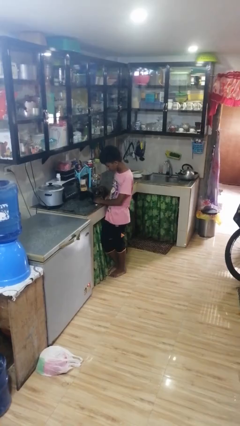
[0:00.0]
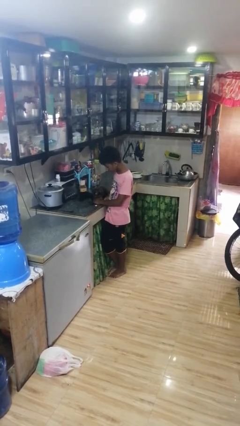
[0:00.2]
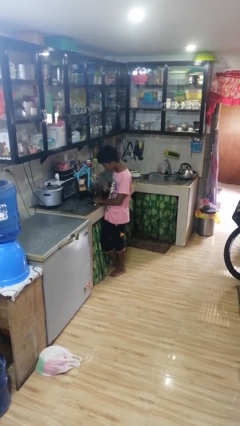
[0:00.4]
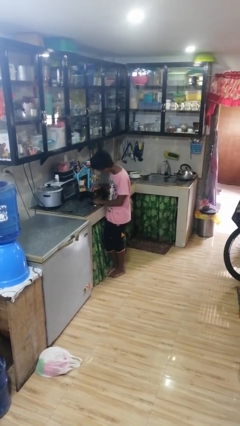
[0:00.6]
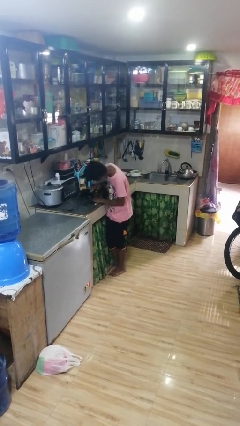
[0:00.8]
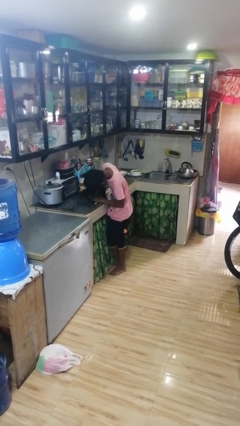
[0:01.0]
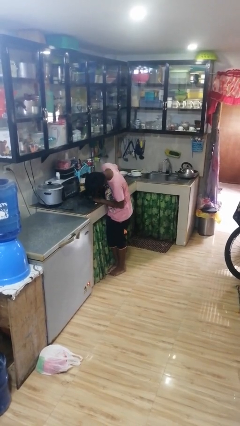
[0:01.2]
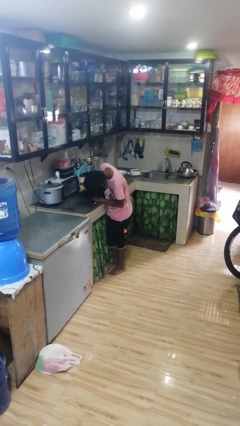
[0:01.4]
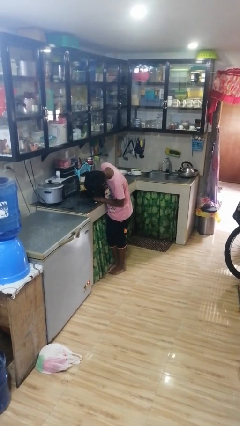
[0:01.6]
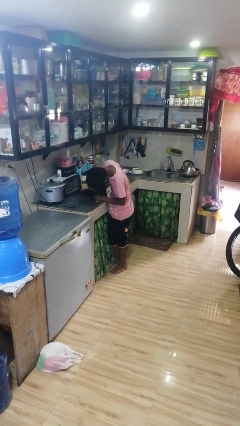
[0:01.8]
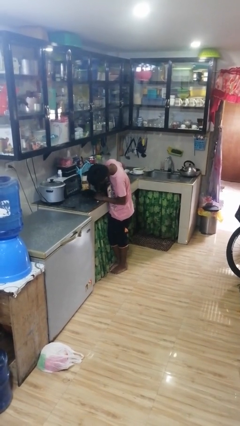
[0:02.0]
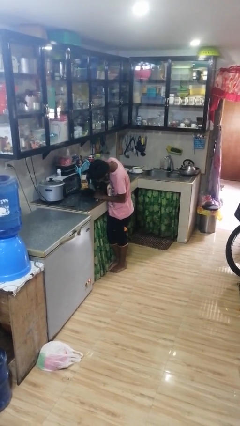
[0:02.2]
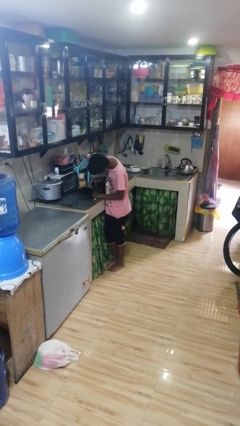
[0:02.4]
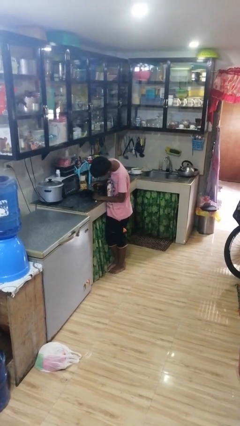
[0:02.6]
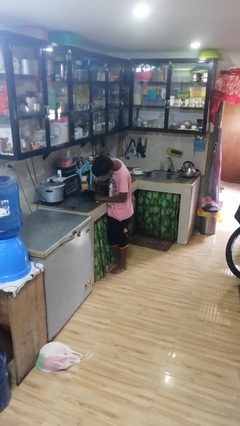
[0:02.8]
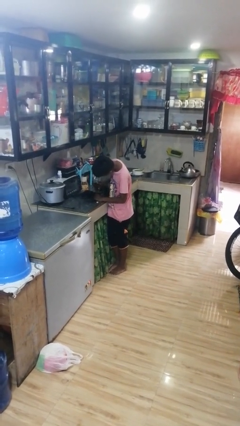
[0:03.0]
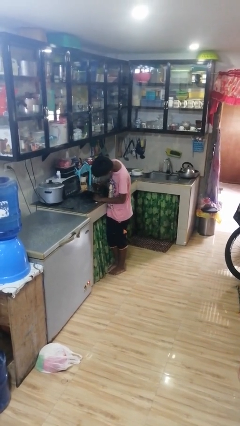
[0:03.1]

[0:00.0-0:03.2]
person pets cat

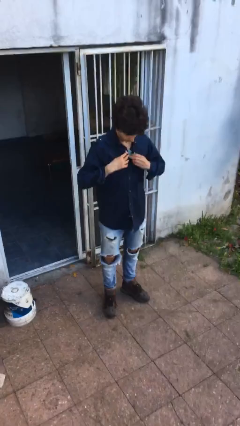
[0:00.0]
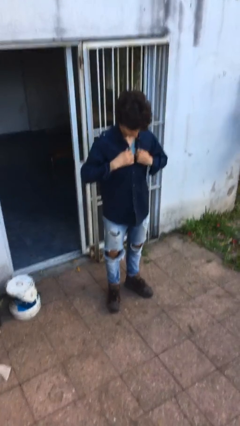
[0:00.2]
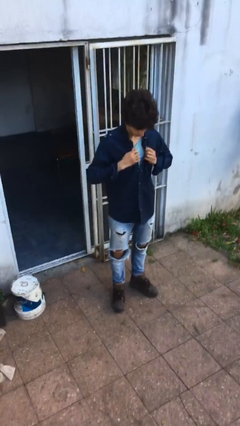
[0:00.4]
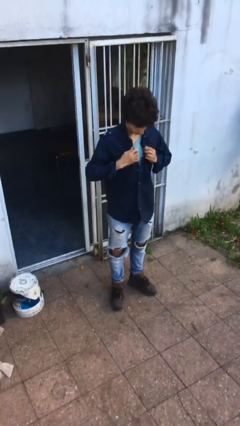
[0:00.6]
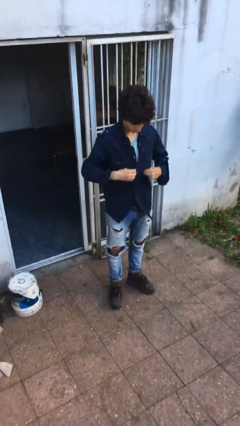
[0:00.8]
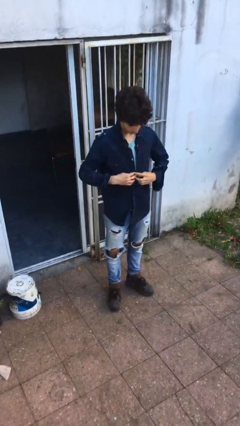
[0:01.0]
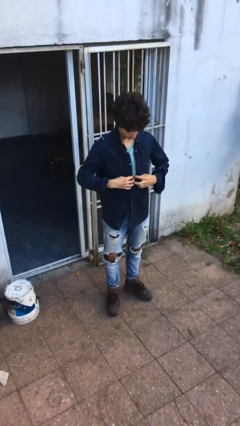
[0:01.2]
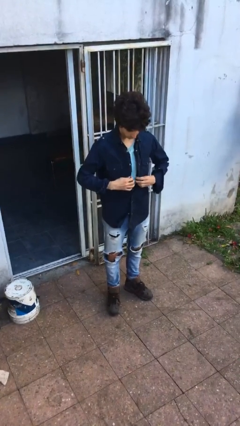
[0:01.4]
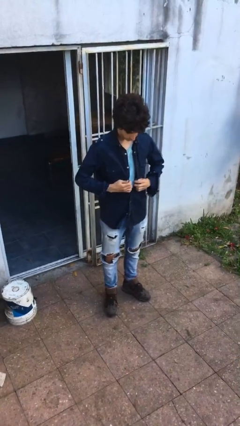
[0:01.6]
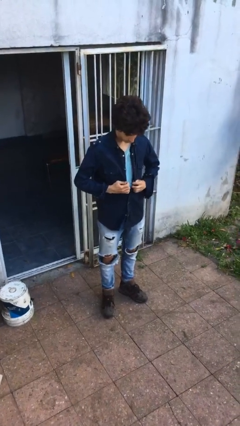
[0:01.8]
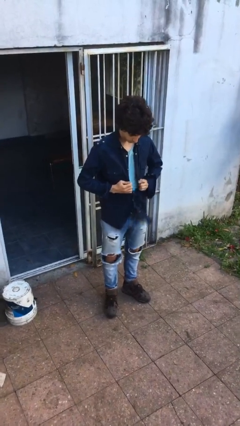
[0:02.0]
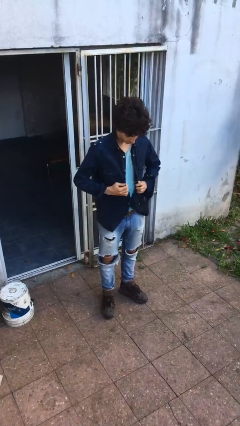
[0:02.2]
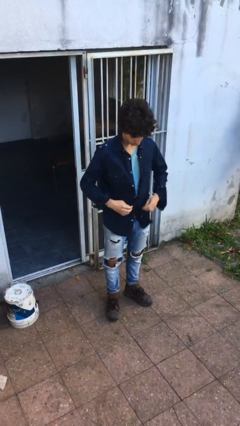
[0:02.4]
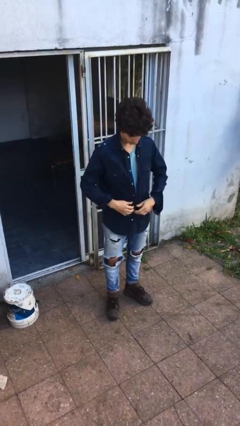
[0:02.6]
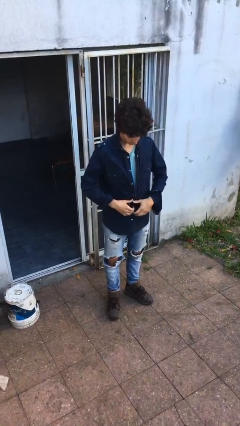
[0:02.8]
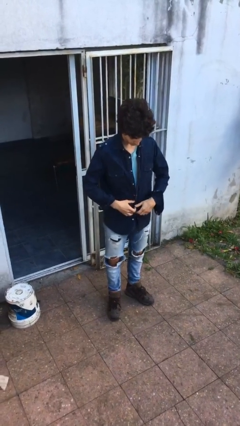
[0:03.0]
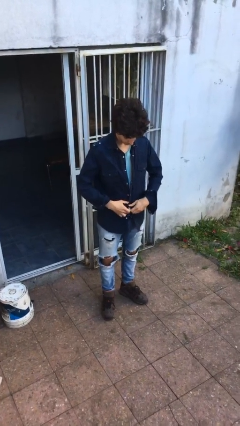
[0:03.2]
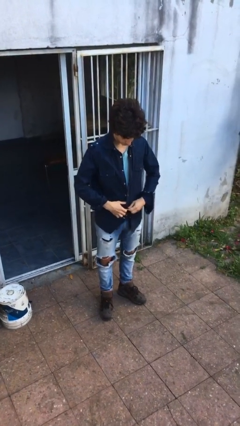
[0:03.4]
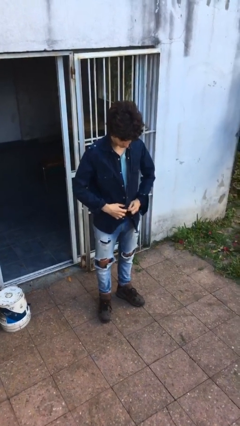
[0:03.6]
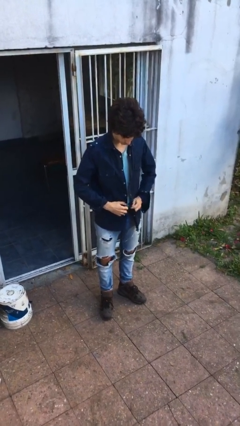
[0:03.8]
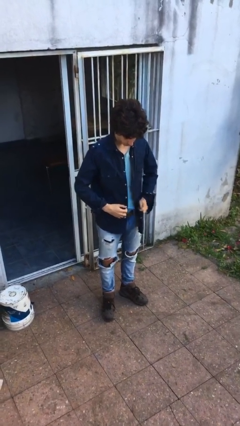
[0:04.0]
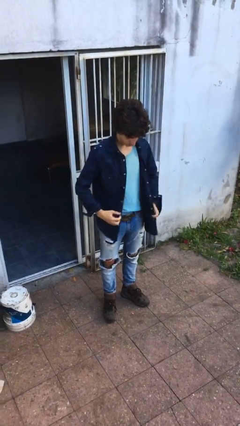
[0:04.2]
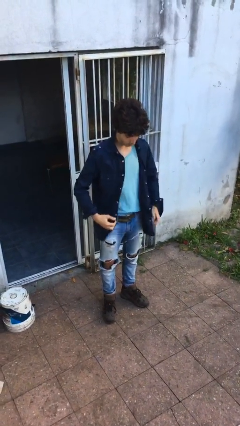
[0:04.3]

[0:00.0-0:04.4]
person unbuttons shirt

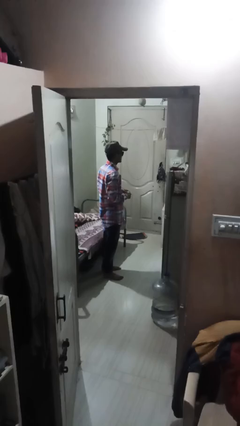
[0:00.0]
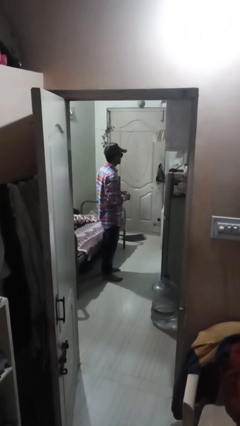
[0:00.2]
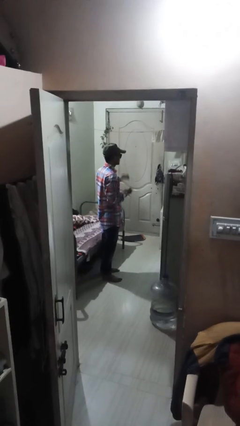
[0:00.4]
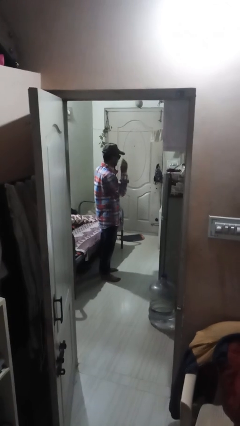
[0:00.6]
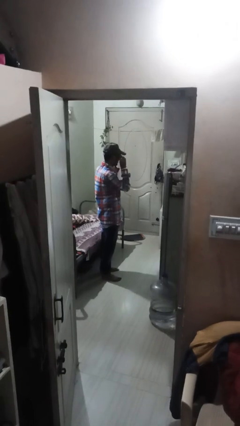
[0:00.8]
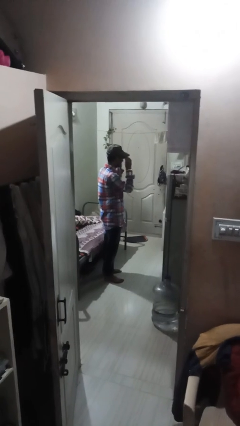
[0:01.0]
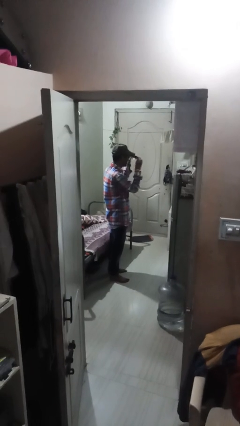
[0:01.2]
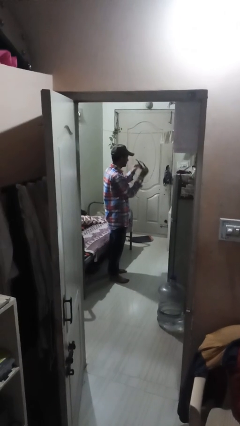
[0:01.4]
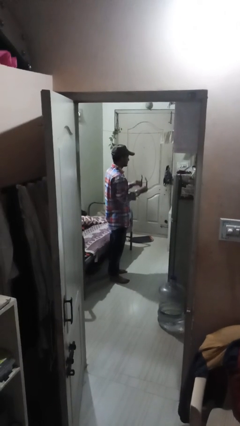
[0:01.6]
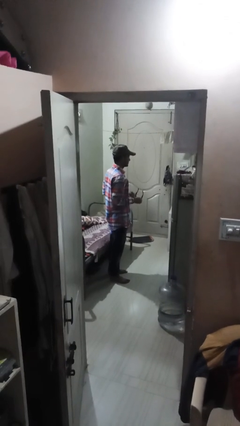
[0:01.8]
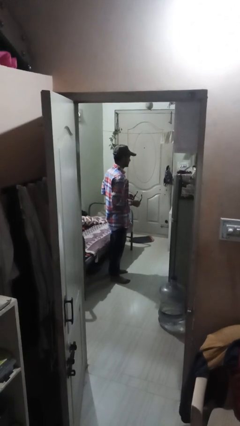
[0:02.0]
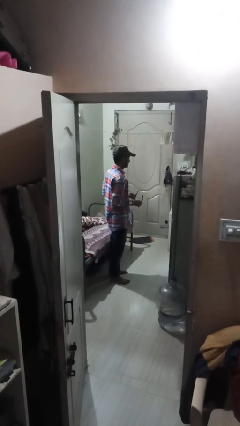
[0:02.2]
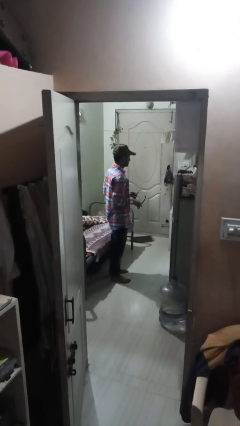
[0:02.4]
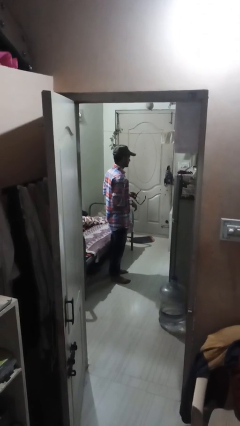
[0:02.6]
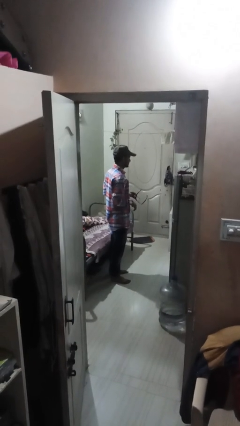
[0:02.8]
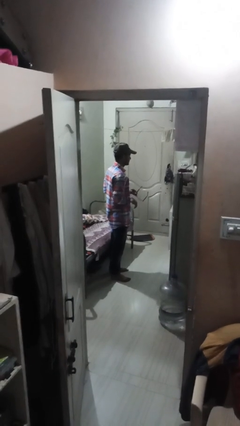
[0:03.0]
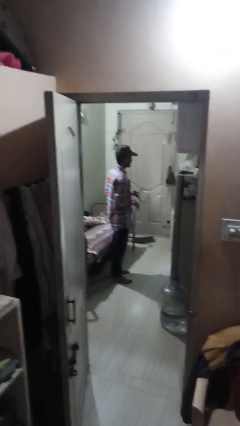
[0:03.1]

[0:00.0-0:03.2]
person takes off sunglasses

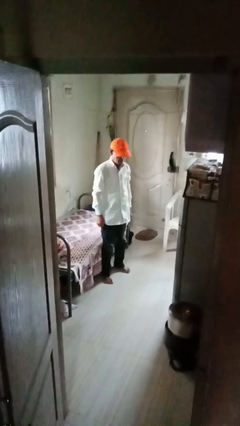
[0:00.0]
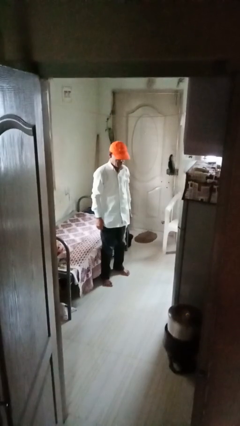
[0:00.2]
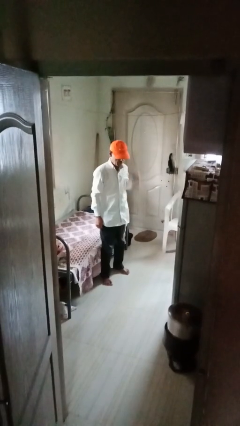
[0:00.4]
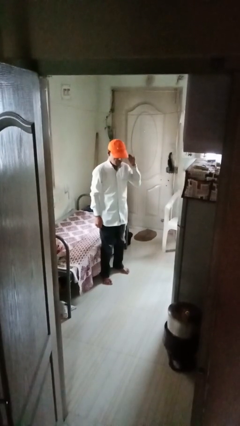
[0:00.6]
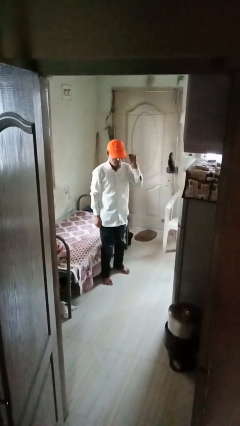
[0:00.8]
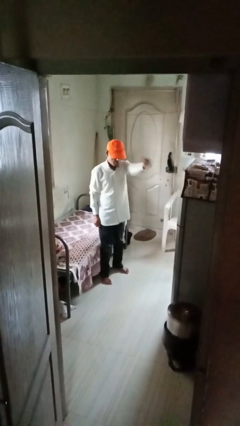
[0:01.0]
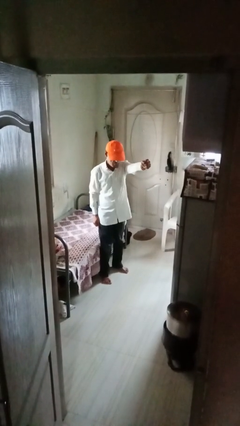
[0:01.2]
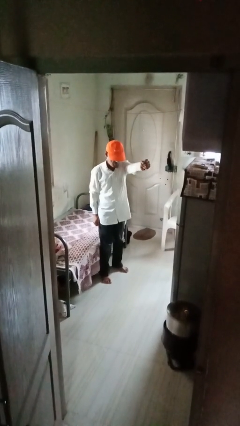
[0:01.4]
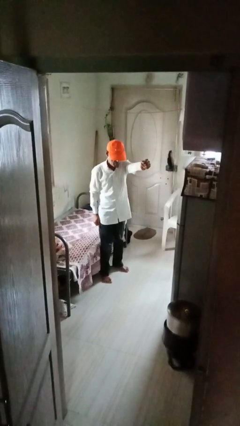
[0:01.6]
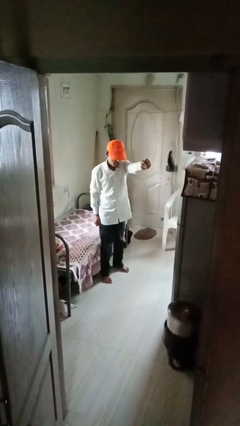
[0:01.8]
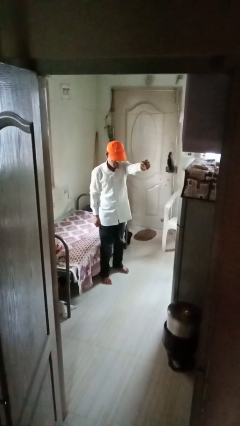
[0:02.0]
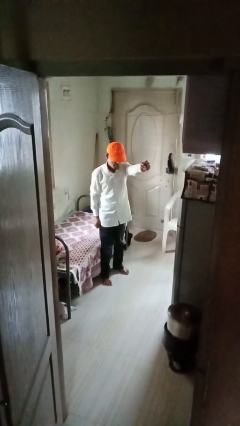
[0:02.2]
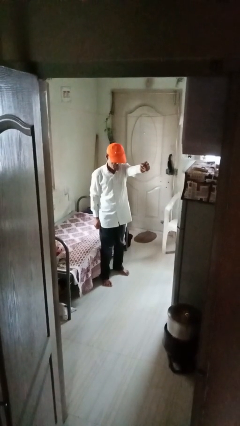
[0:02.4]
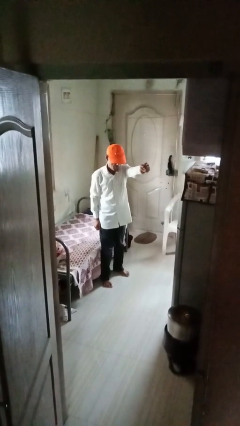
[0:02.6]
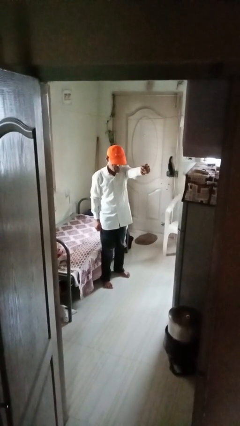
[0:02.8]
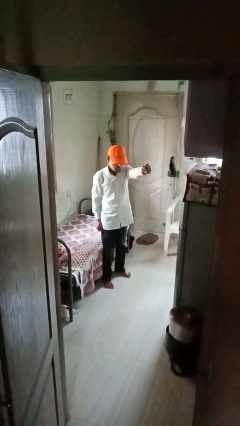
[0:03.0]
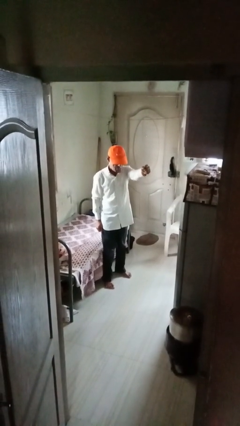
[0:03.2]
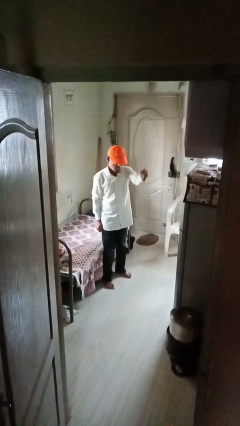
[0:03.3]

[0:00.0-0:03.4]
person punches

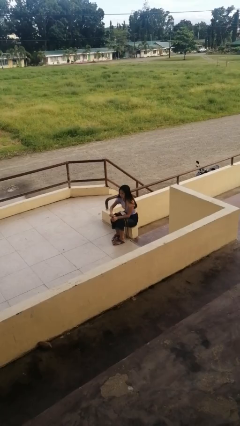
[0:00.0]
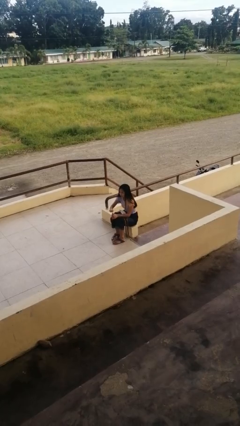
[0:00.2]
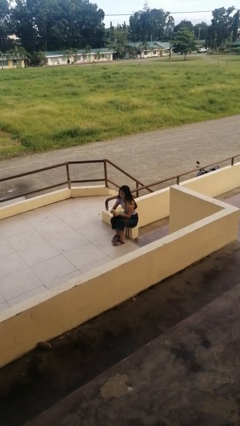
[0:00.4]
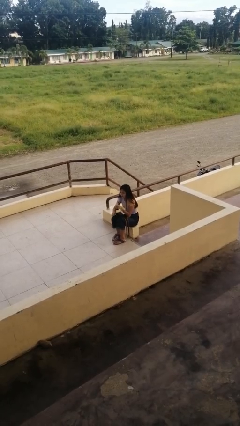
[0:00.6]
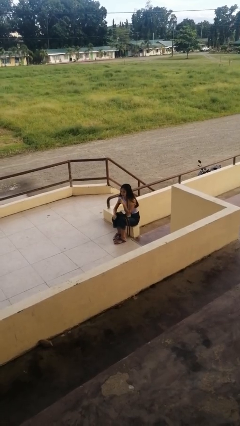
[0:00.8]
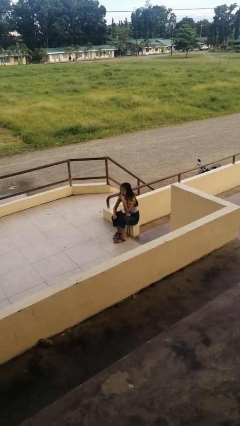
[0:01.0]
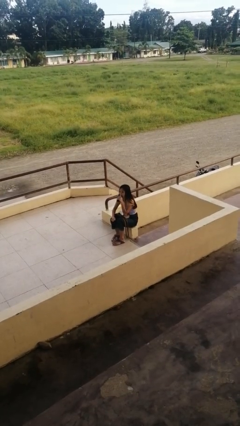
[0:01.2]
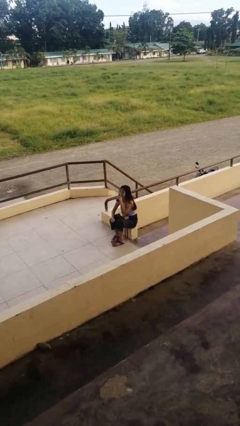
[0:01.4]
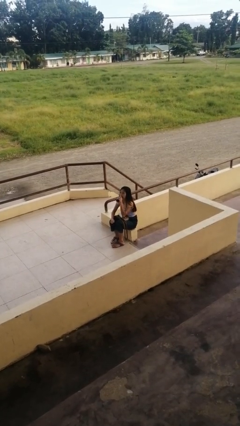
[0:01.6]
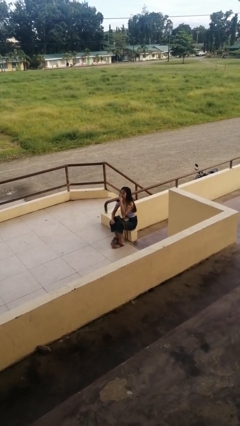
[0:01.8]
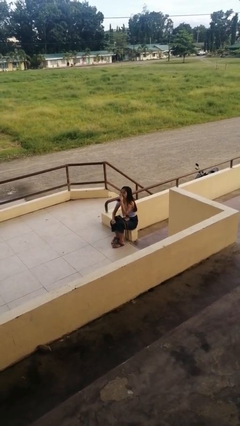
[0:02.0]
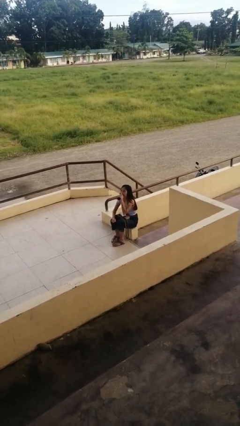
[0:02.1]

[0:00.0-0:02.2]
person drinks from beverage can

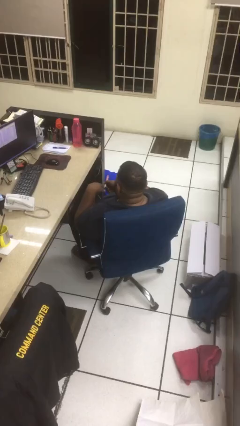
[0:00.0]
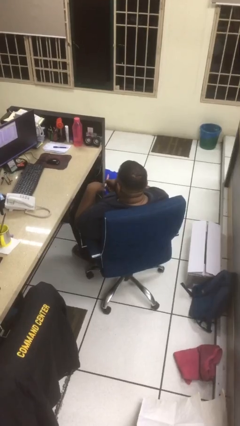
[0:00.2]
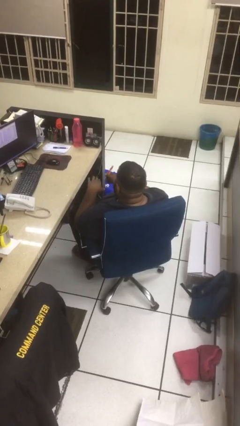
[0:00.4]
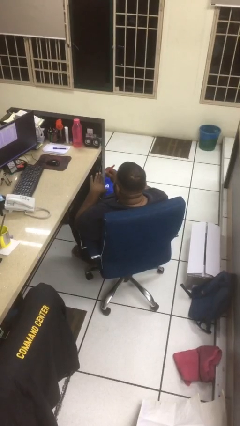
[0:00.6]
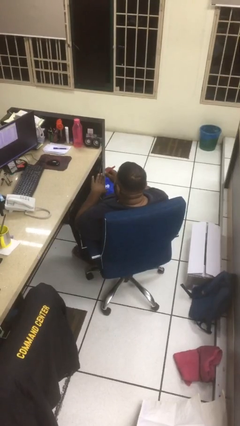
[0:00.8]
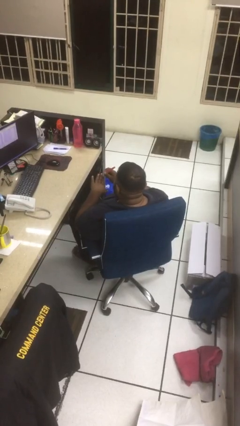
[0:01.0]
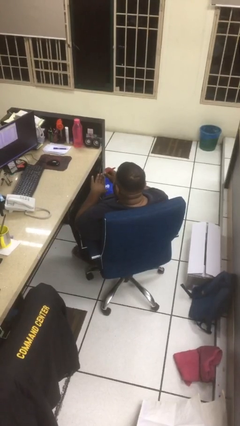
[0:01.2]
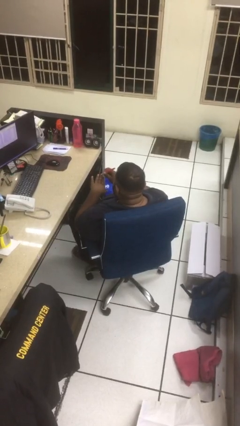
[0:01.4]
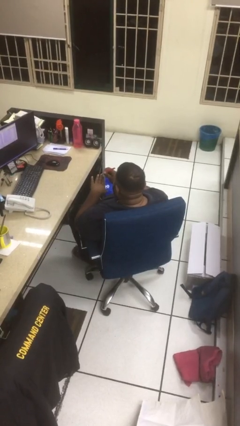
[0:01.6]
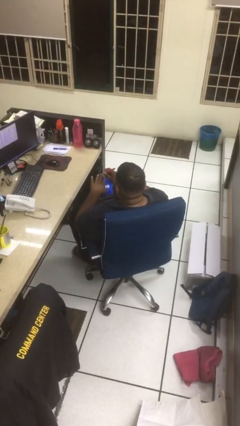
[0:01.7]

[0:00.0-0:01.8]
person paints fingernails
